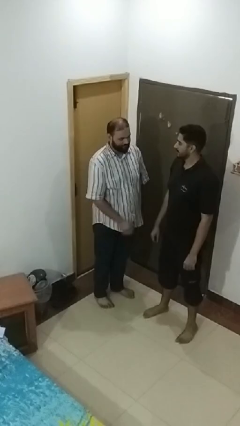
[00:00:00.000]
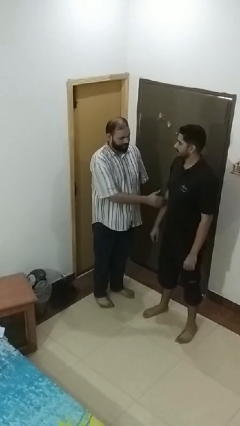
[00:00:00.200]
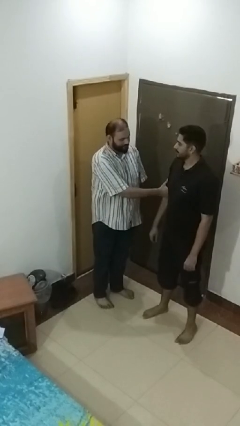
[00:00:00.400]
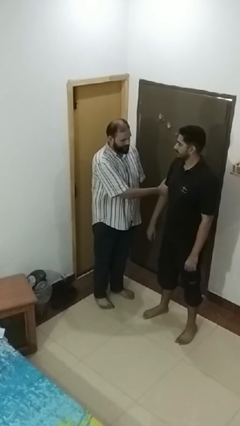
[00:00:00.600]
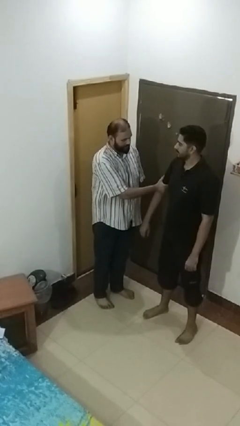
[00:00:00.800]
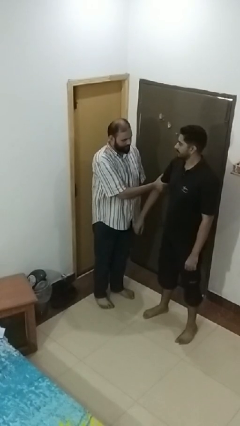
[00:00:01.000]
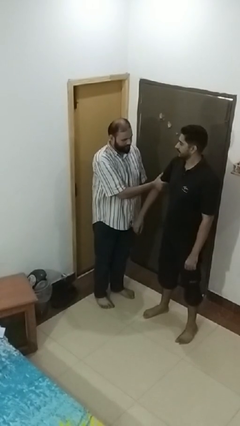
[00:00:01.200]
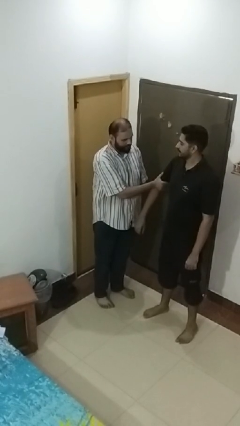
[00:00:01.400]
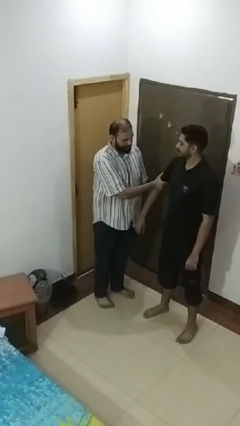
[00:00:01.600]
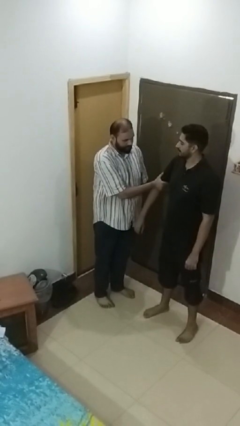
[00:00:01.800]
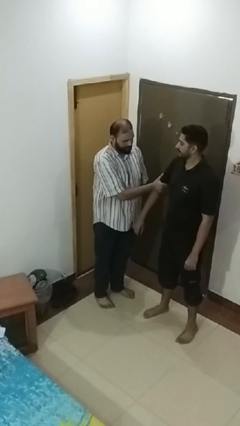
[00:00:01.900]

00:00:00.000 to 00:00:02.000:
person grabs person by bicep

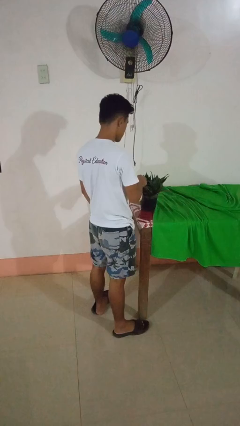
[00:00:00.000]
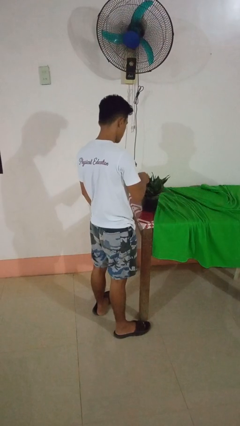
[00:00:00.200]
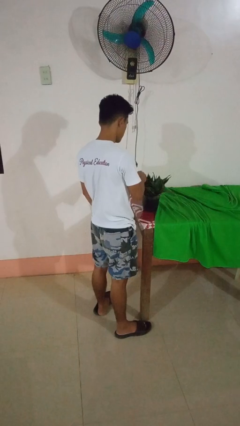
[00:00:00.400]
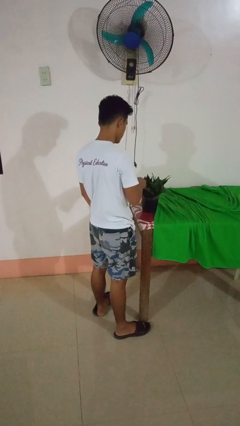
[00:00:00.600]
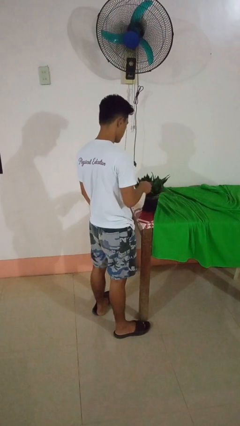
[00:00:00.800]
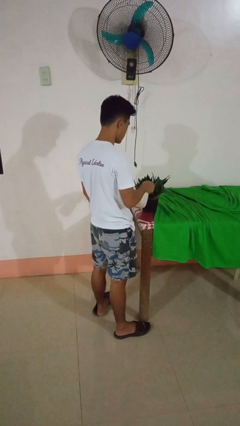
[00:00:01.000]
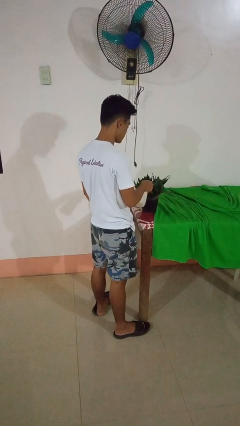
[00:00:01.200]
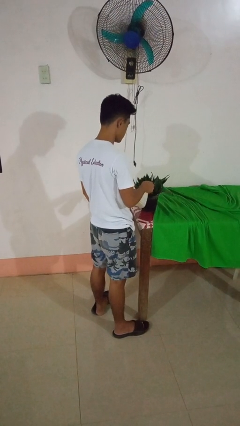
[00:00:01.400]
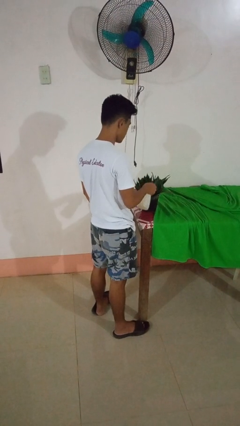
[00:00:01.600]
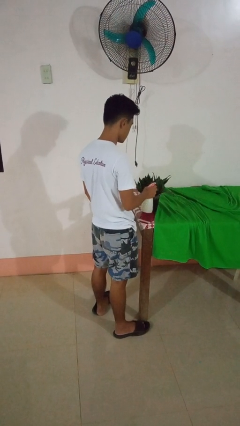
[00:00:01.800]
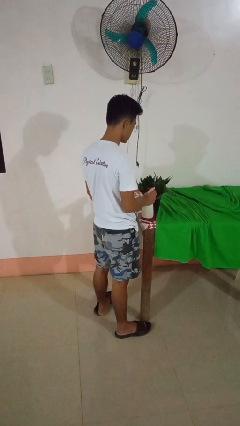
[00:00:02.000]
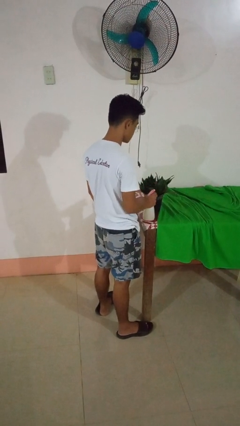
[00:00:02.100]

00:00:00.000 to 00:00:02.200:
person waters houseplant

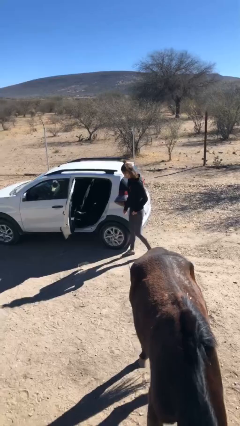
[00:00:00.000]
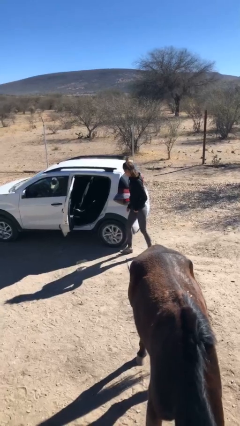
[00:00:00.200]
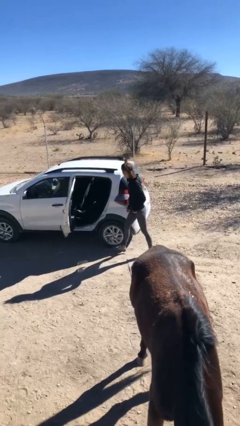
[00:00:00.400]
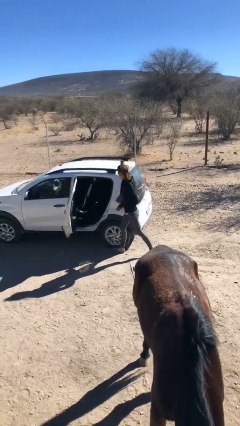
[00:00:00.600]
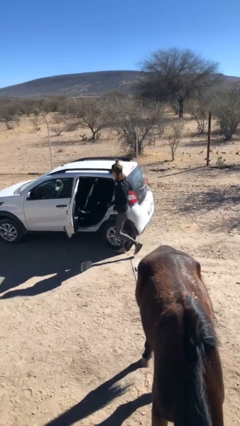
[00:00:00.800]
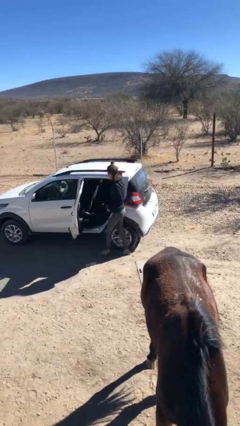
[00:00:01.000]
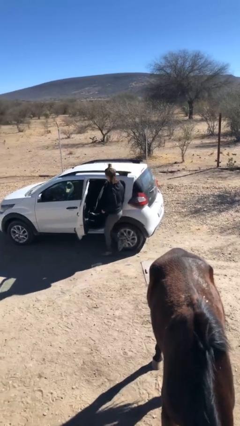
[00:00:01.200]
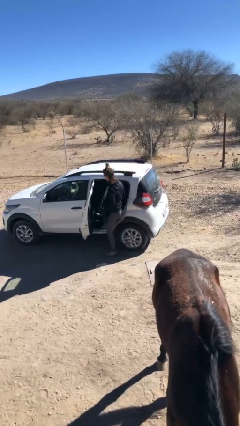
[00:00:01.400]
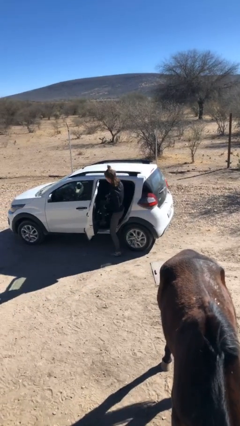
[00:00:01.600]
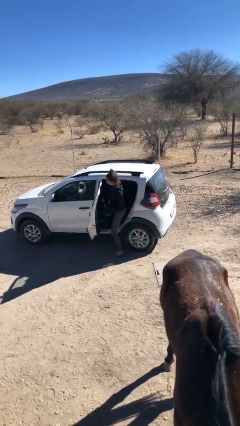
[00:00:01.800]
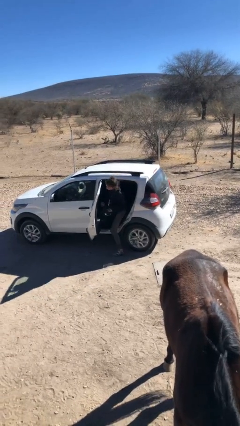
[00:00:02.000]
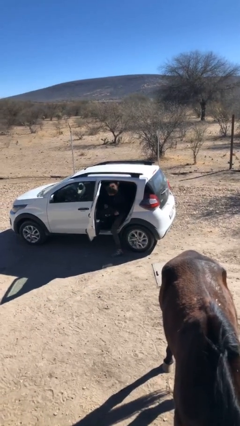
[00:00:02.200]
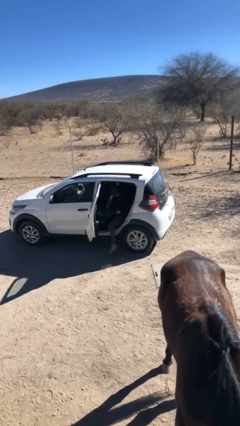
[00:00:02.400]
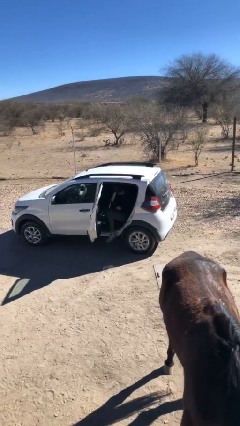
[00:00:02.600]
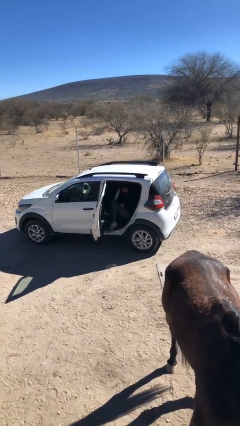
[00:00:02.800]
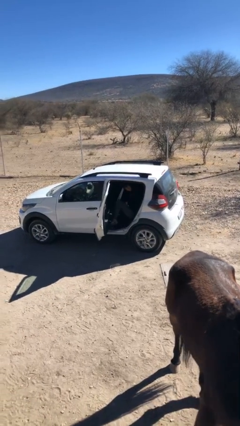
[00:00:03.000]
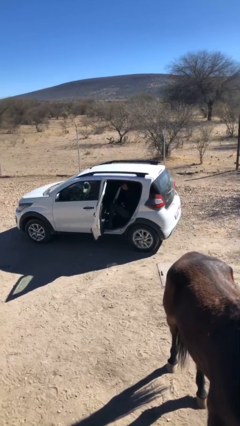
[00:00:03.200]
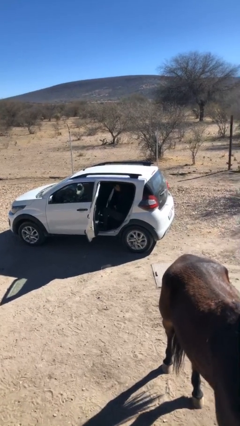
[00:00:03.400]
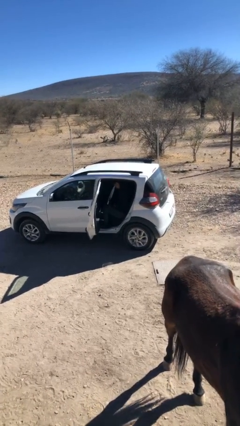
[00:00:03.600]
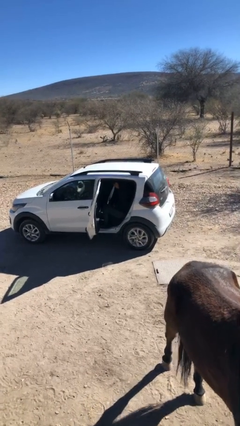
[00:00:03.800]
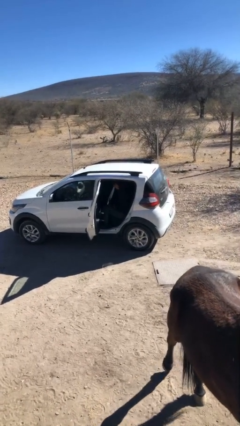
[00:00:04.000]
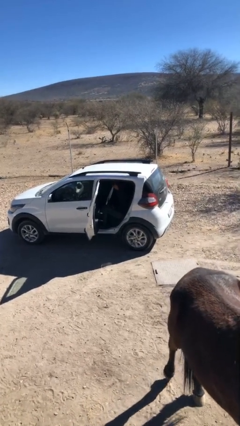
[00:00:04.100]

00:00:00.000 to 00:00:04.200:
person enters car

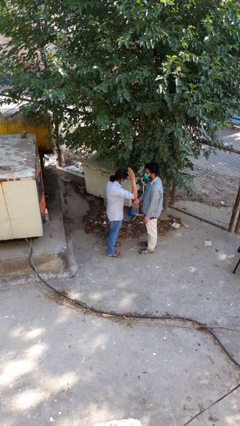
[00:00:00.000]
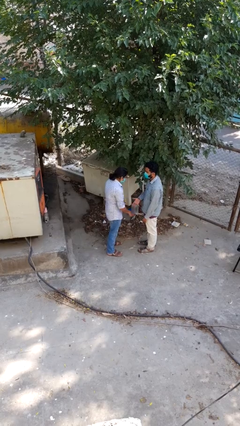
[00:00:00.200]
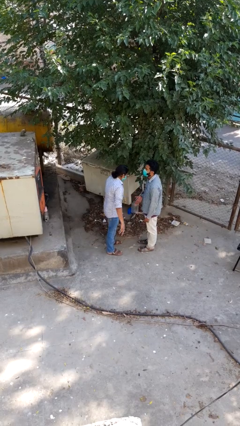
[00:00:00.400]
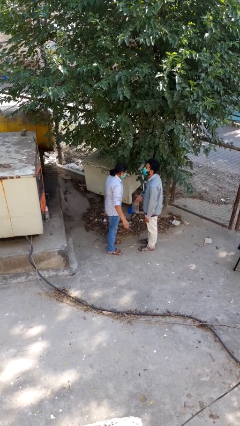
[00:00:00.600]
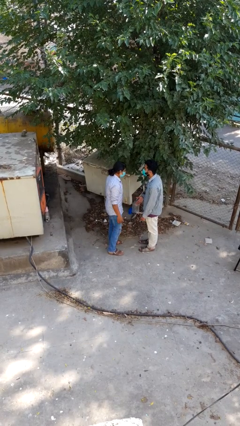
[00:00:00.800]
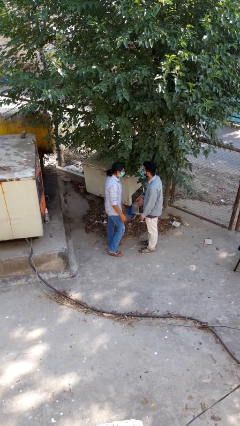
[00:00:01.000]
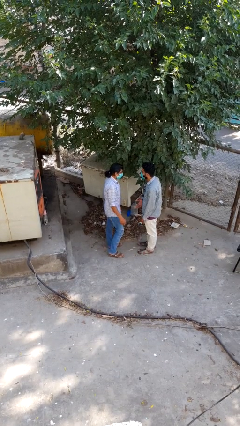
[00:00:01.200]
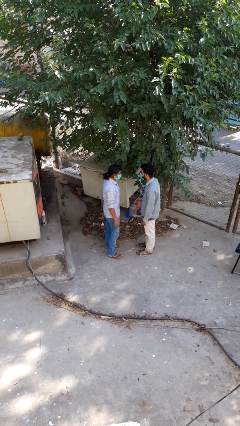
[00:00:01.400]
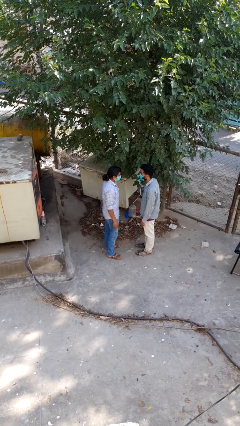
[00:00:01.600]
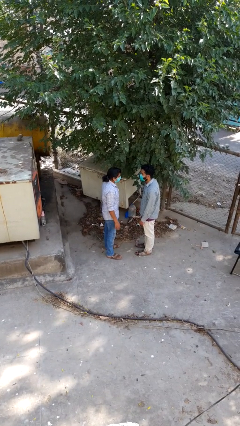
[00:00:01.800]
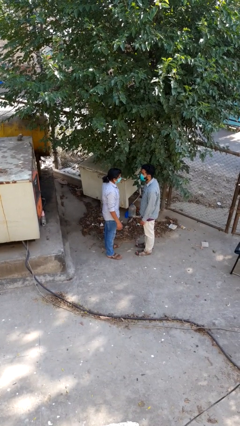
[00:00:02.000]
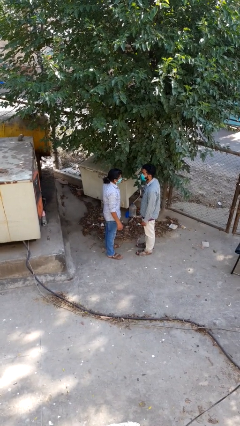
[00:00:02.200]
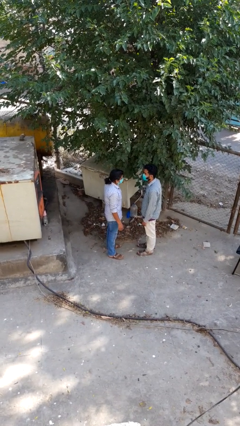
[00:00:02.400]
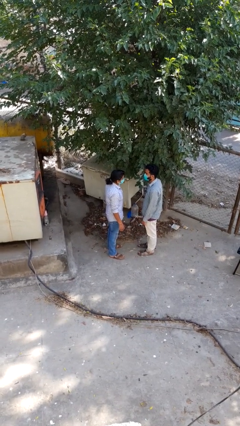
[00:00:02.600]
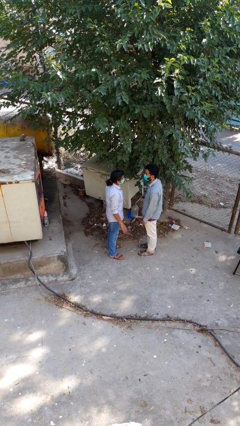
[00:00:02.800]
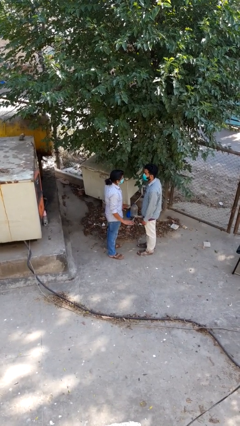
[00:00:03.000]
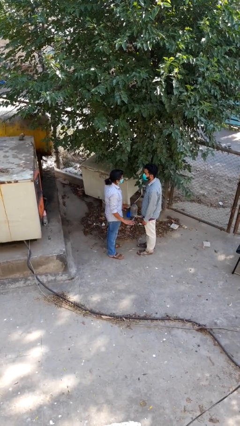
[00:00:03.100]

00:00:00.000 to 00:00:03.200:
person highfives hand

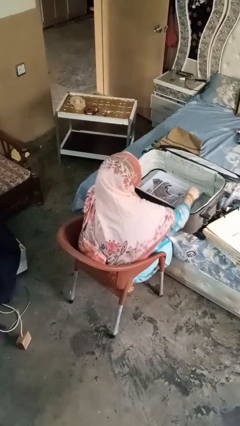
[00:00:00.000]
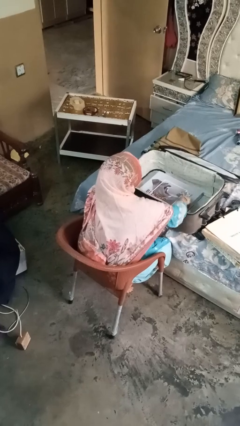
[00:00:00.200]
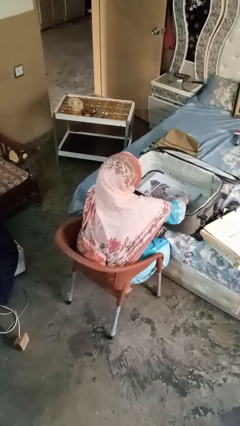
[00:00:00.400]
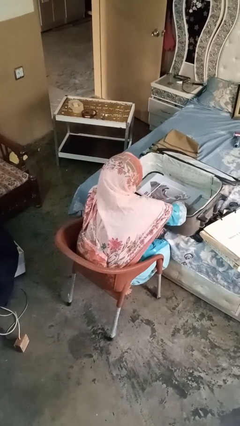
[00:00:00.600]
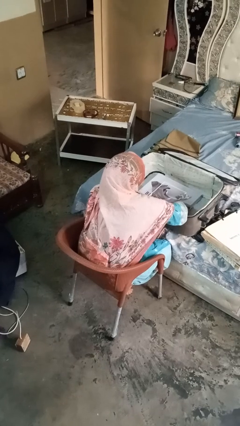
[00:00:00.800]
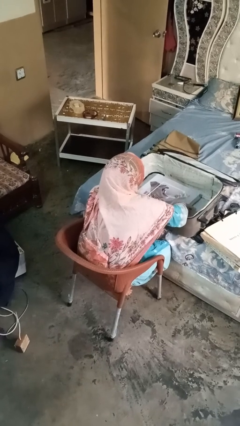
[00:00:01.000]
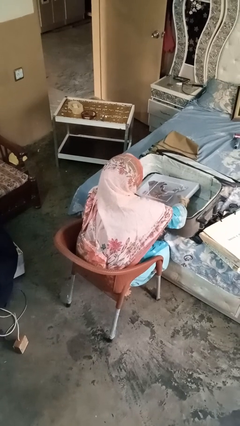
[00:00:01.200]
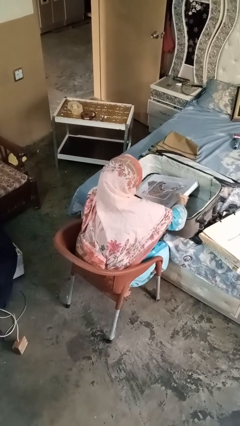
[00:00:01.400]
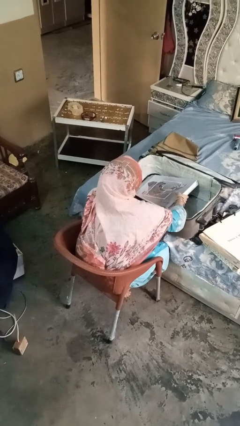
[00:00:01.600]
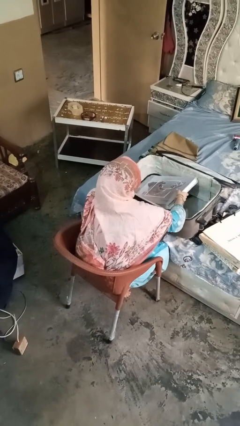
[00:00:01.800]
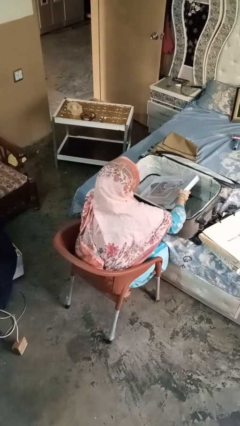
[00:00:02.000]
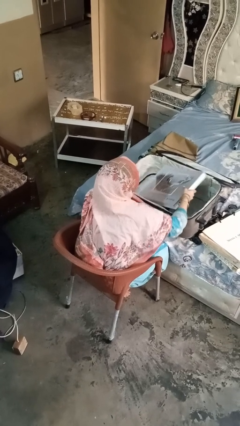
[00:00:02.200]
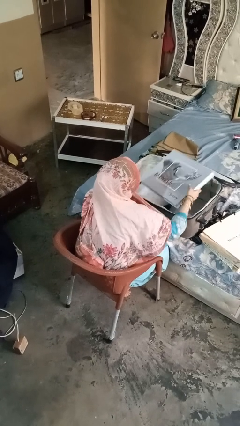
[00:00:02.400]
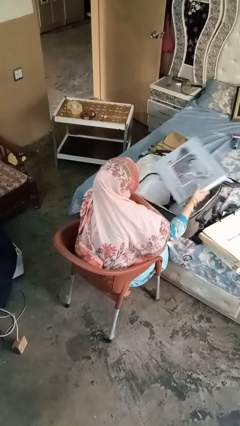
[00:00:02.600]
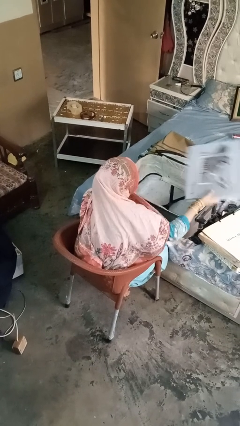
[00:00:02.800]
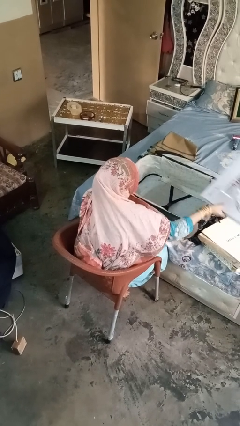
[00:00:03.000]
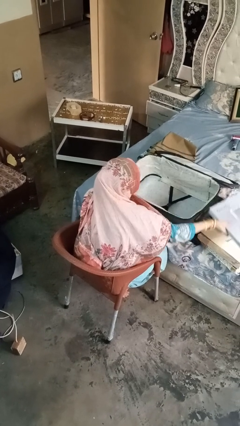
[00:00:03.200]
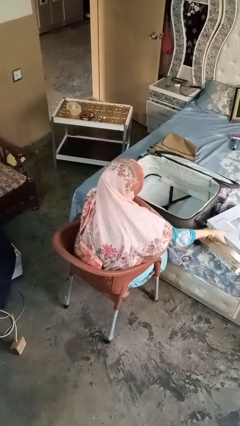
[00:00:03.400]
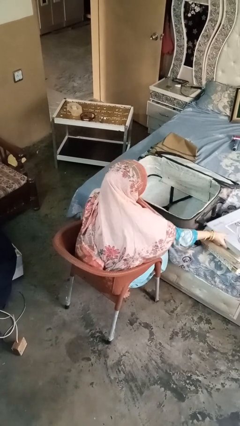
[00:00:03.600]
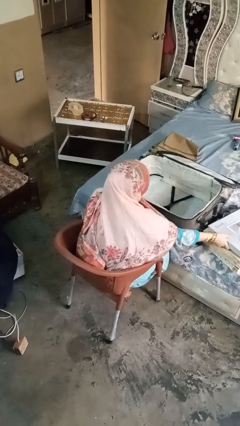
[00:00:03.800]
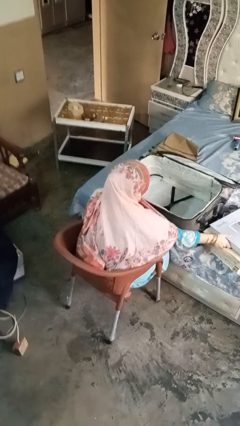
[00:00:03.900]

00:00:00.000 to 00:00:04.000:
person unloads clothes from suitcase

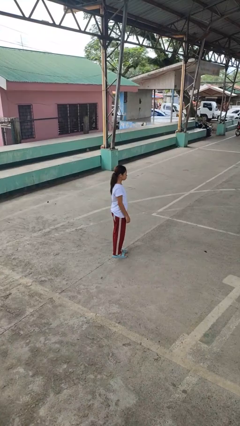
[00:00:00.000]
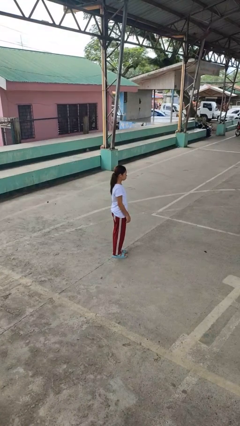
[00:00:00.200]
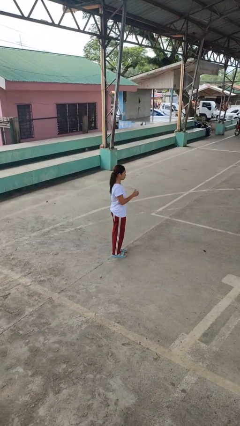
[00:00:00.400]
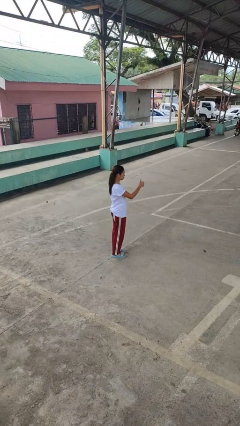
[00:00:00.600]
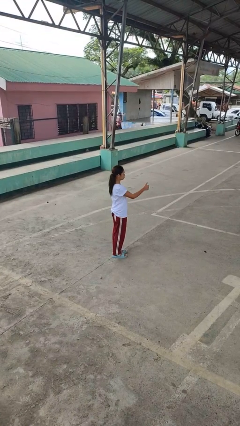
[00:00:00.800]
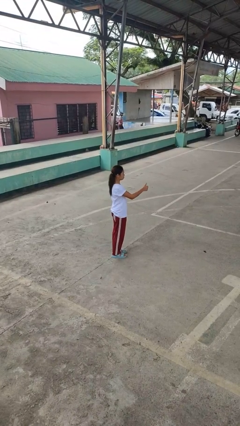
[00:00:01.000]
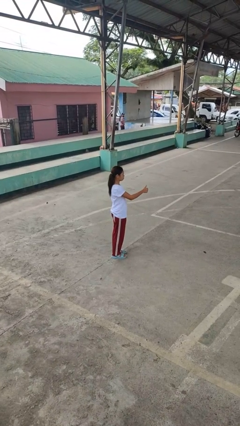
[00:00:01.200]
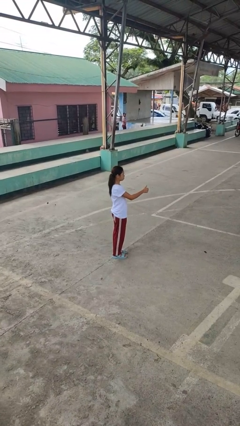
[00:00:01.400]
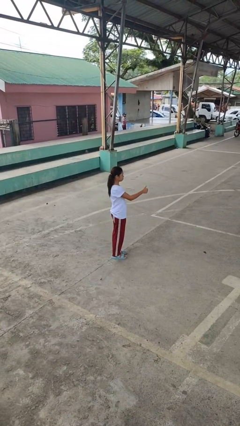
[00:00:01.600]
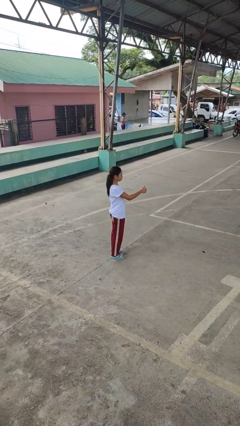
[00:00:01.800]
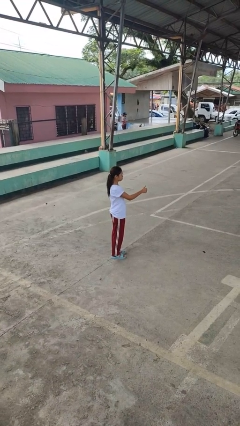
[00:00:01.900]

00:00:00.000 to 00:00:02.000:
person gestures thumbs up
